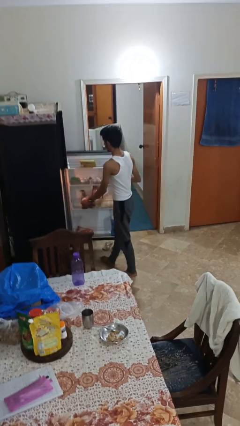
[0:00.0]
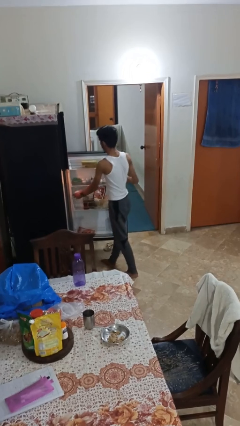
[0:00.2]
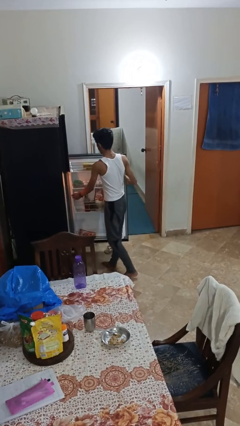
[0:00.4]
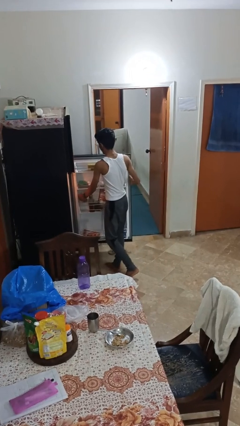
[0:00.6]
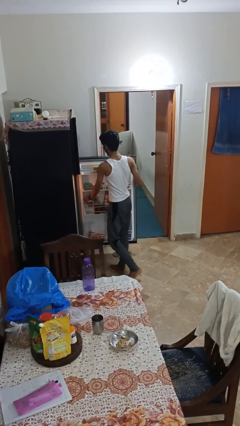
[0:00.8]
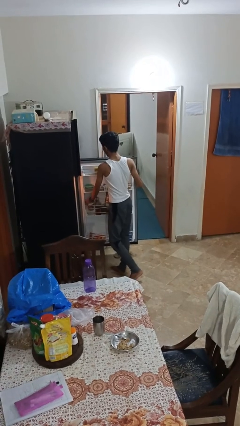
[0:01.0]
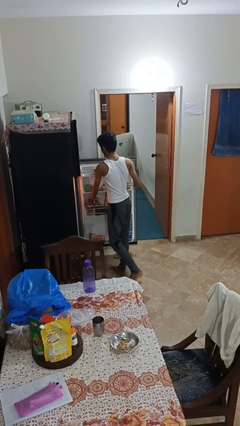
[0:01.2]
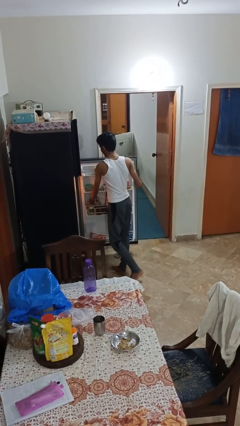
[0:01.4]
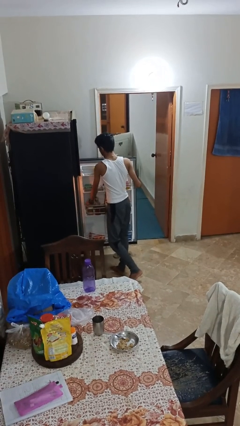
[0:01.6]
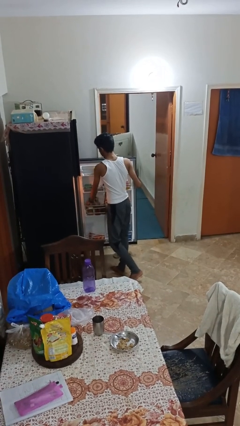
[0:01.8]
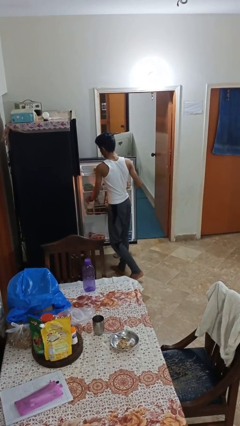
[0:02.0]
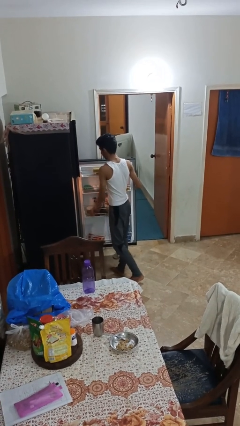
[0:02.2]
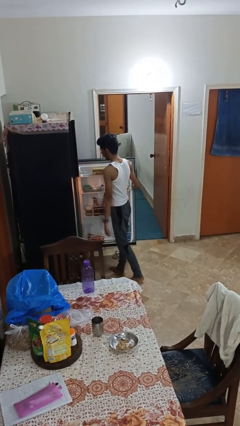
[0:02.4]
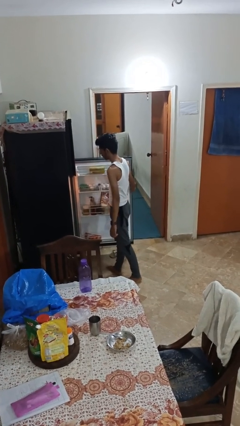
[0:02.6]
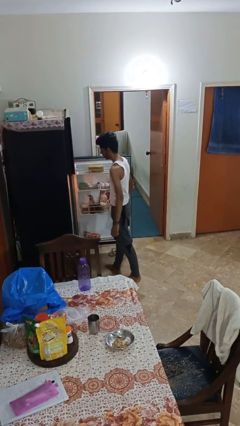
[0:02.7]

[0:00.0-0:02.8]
person puts object into refrigerator

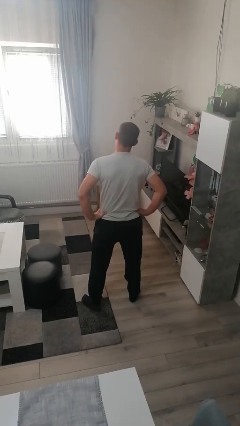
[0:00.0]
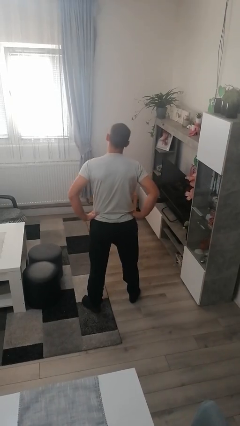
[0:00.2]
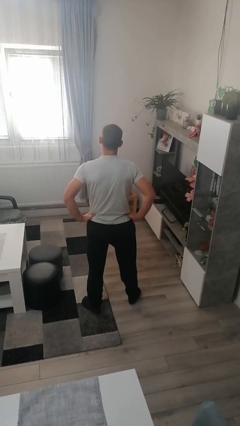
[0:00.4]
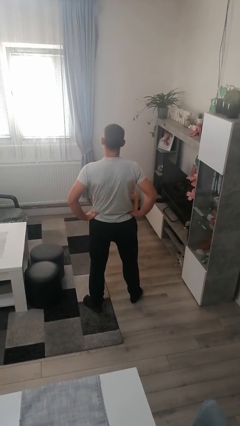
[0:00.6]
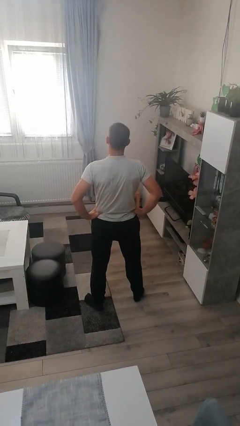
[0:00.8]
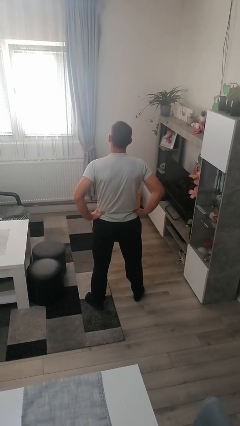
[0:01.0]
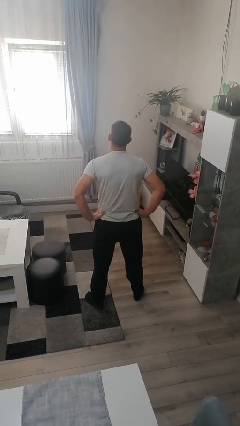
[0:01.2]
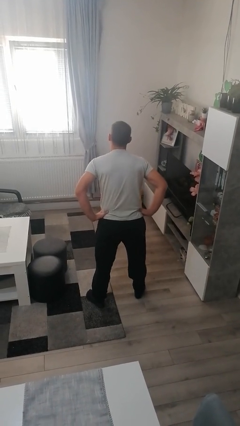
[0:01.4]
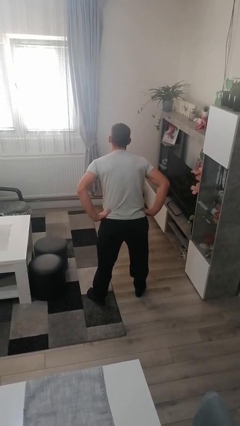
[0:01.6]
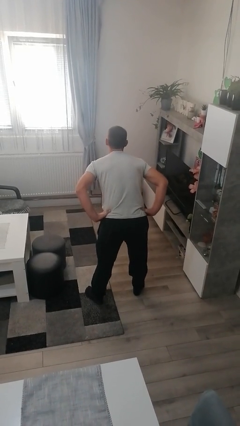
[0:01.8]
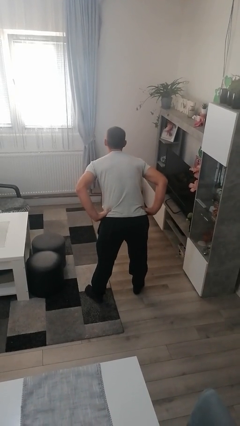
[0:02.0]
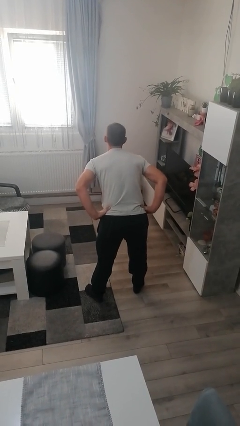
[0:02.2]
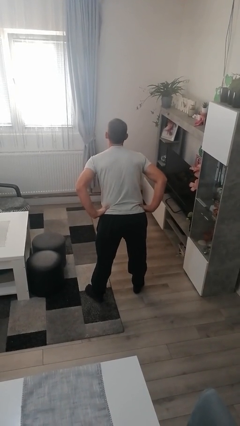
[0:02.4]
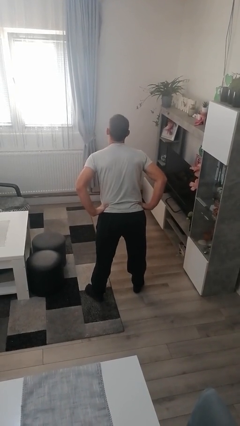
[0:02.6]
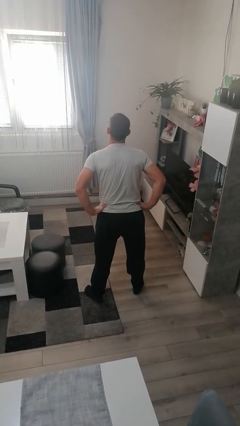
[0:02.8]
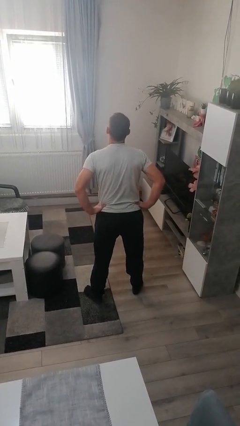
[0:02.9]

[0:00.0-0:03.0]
person wiggles hips

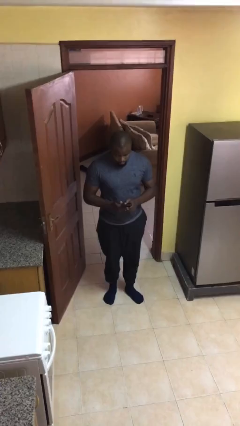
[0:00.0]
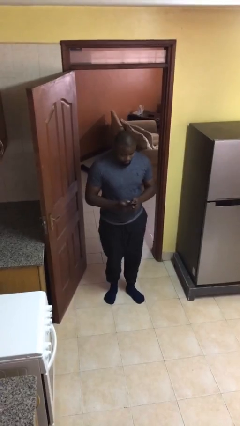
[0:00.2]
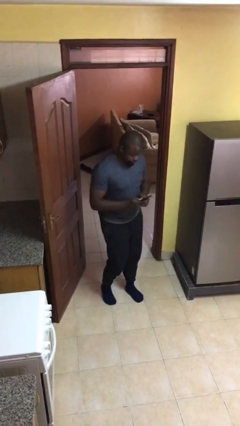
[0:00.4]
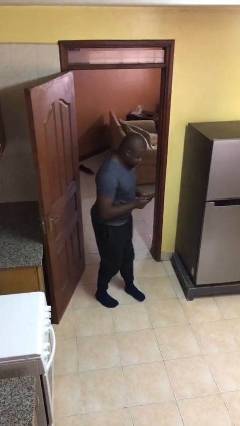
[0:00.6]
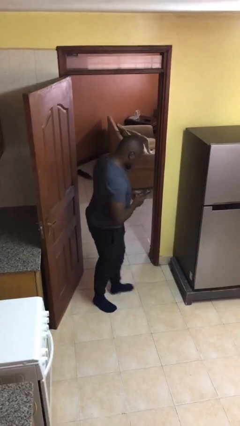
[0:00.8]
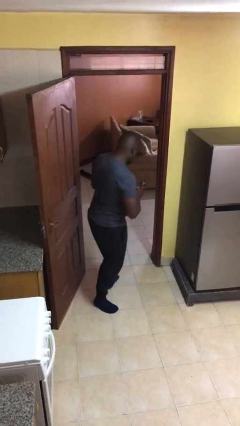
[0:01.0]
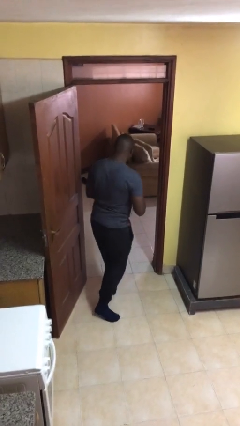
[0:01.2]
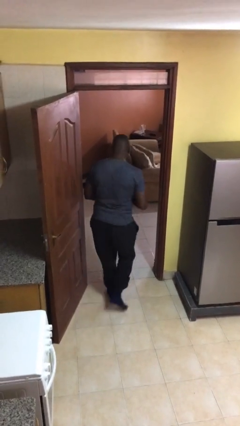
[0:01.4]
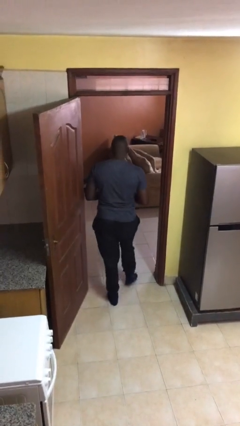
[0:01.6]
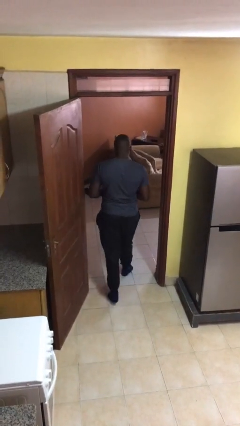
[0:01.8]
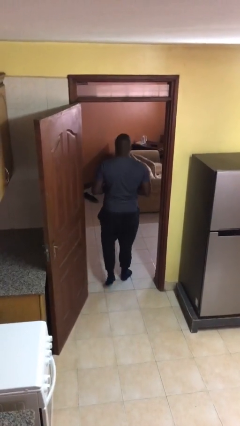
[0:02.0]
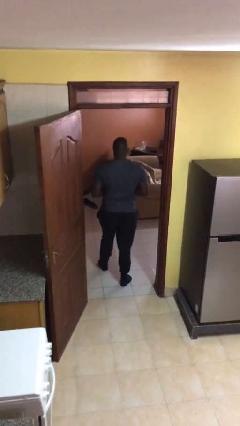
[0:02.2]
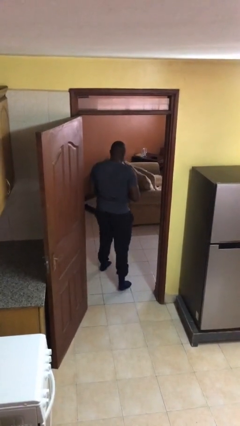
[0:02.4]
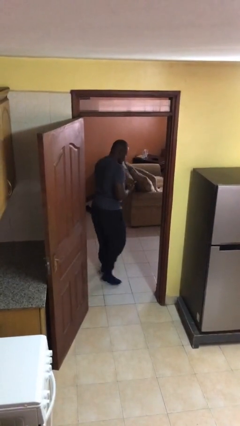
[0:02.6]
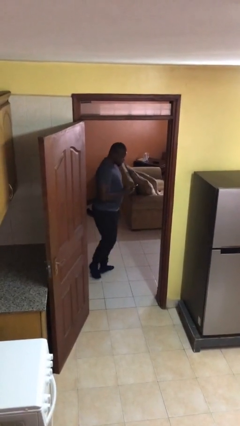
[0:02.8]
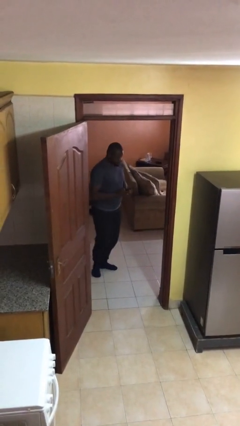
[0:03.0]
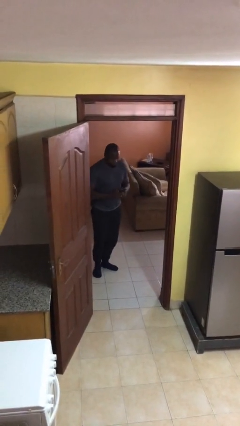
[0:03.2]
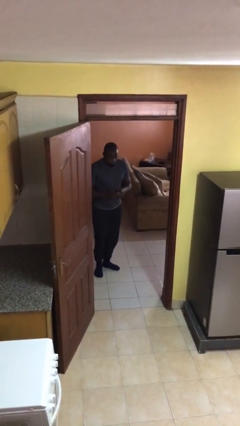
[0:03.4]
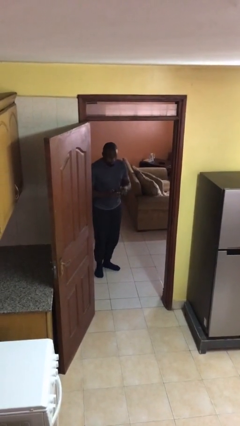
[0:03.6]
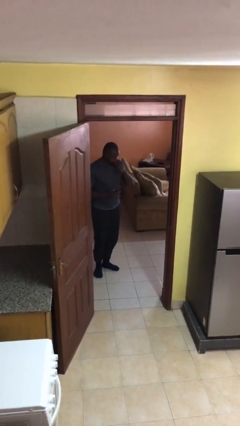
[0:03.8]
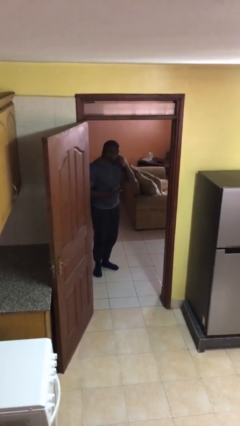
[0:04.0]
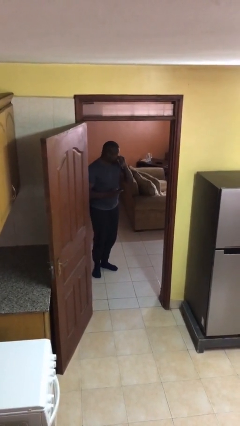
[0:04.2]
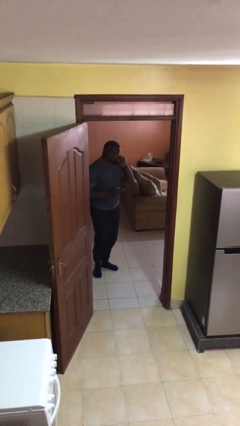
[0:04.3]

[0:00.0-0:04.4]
person exits scene through structure

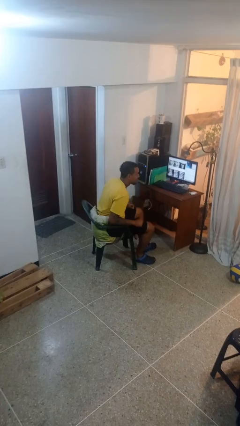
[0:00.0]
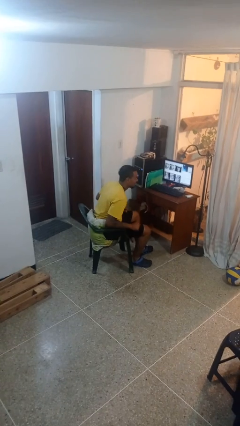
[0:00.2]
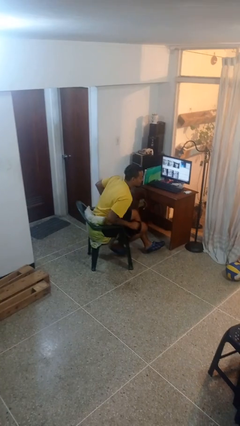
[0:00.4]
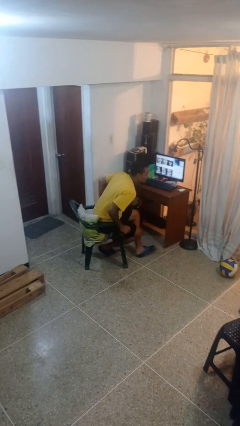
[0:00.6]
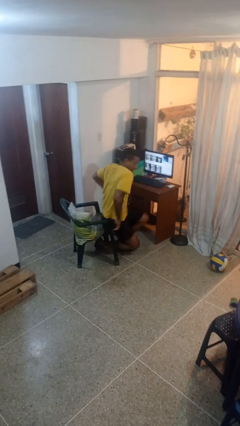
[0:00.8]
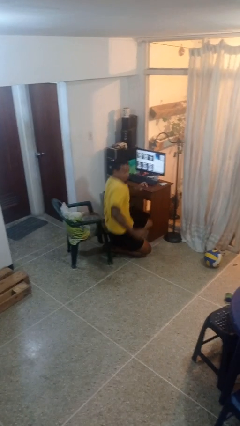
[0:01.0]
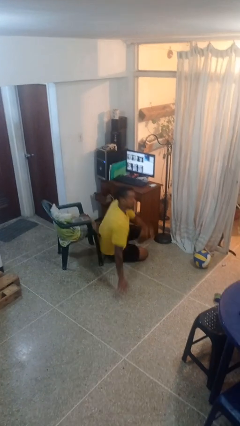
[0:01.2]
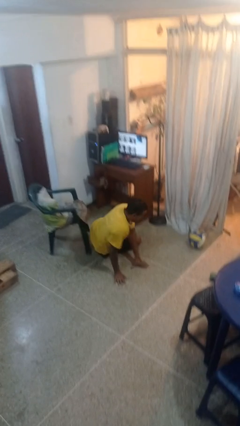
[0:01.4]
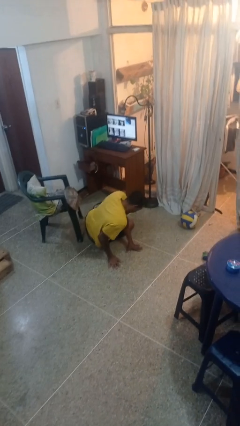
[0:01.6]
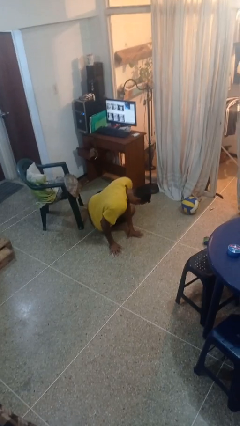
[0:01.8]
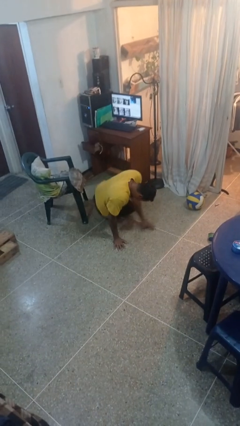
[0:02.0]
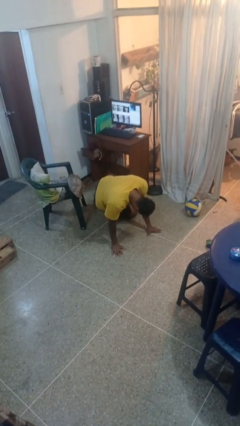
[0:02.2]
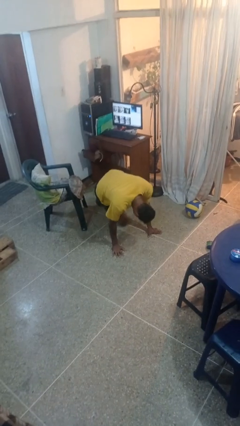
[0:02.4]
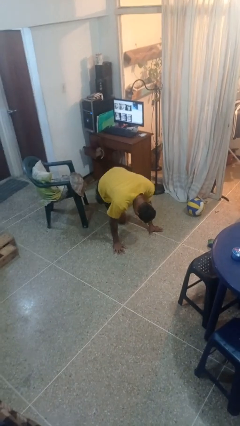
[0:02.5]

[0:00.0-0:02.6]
person falls from chair

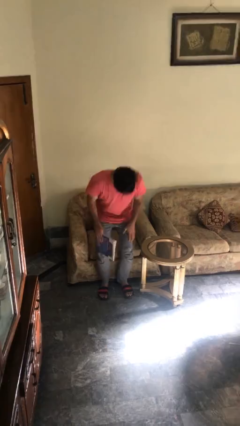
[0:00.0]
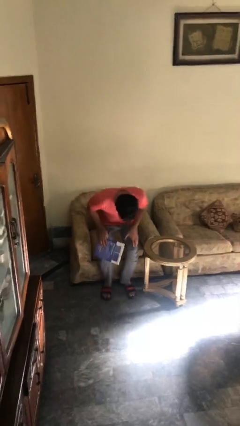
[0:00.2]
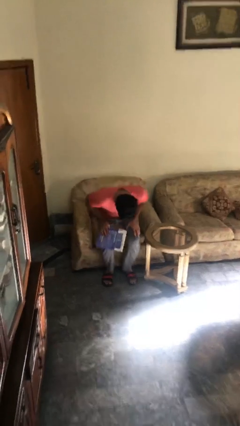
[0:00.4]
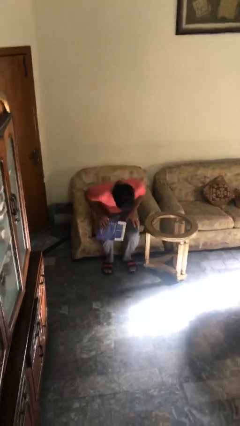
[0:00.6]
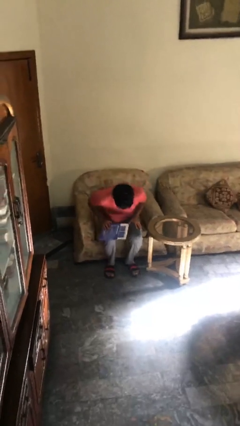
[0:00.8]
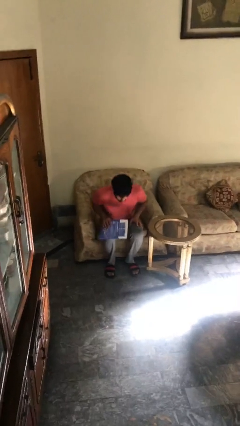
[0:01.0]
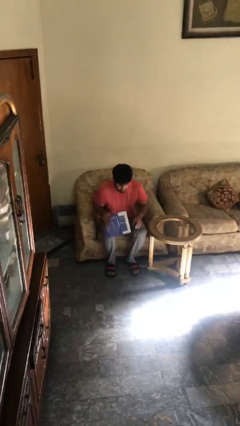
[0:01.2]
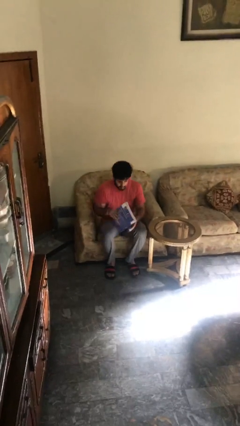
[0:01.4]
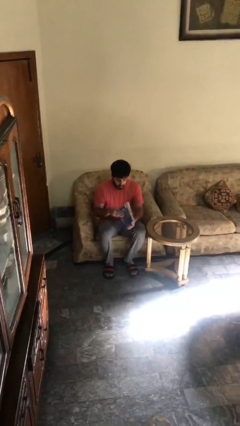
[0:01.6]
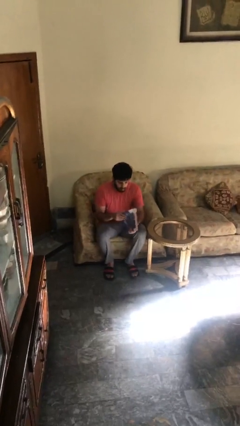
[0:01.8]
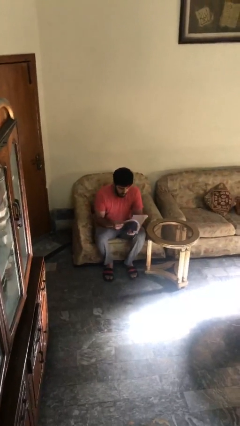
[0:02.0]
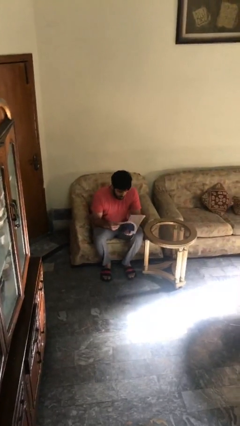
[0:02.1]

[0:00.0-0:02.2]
person sits down

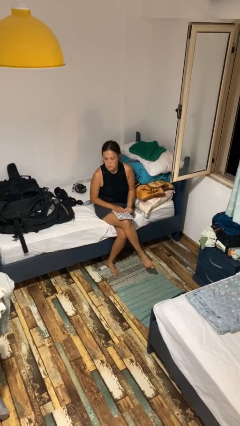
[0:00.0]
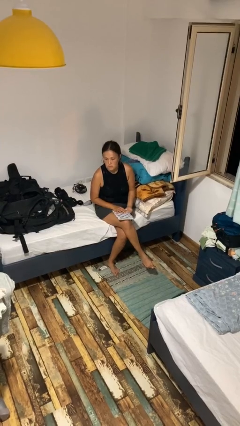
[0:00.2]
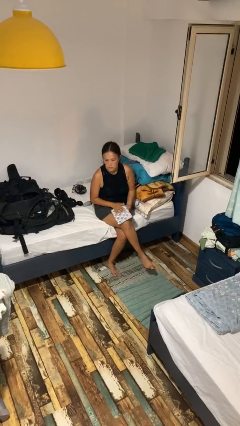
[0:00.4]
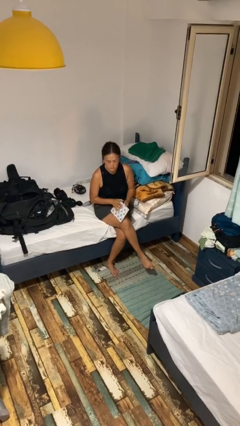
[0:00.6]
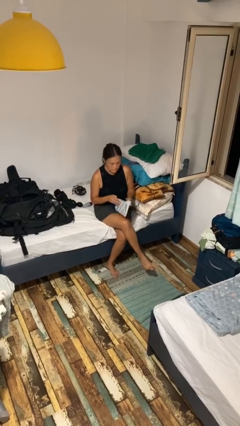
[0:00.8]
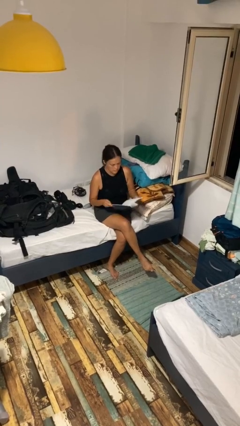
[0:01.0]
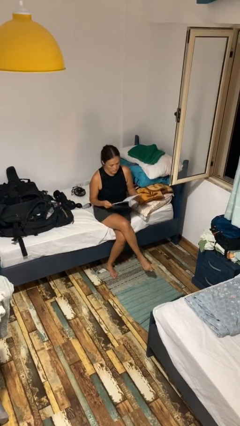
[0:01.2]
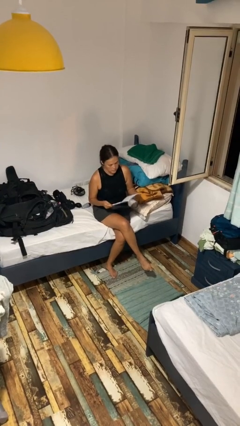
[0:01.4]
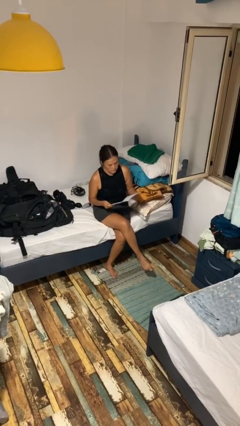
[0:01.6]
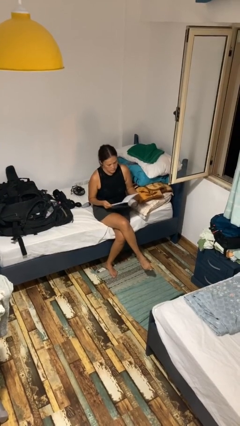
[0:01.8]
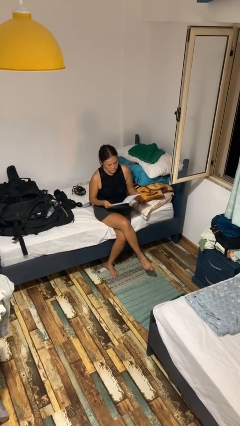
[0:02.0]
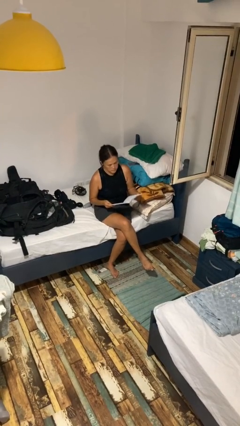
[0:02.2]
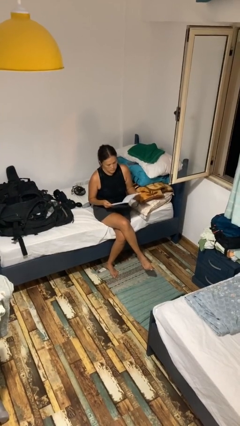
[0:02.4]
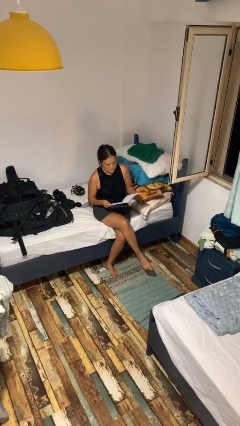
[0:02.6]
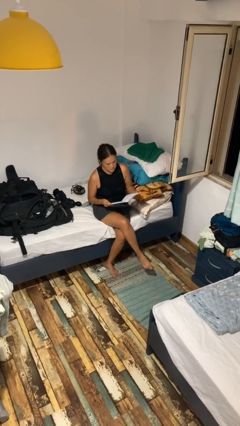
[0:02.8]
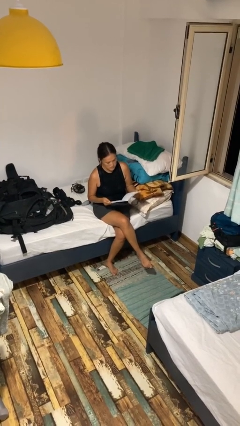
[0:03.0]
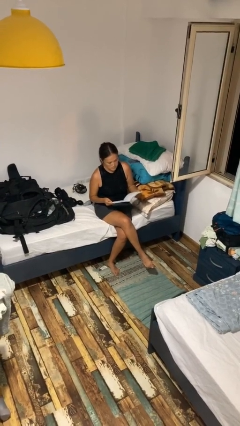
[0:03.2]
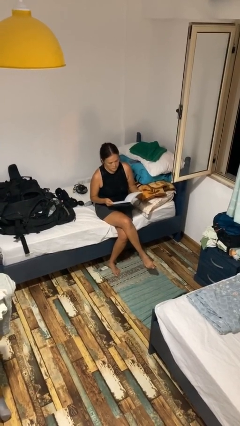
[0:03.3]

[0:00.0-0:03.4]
person reads magazine
